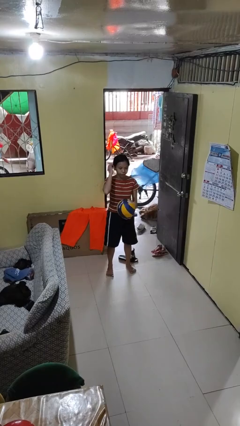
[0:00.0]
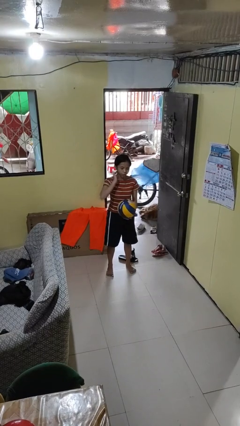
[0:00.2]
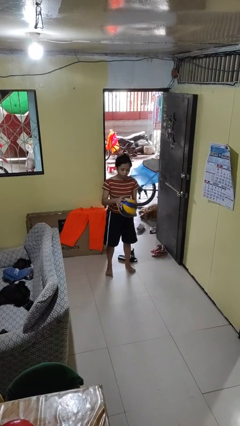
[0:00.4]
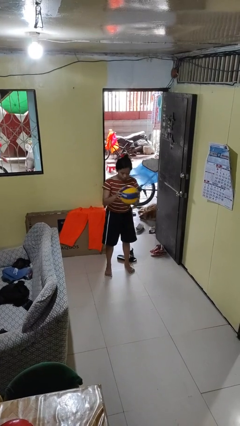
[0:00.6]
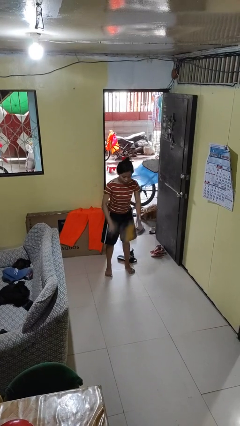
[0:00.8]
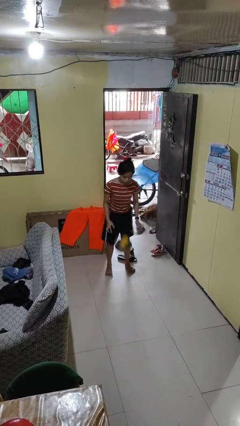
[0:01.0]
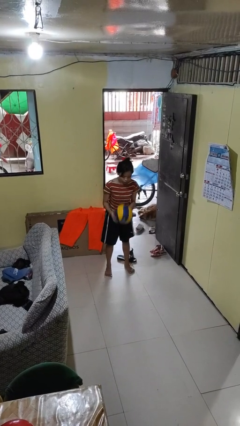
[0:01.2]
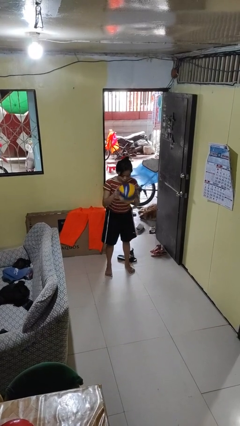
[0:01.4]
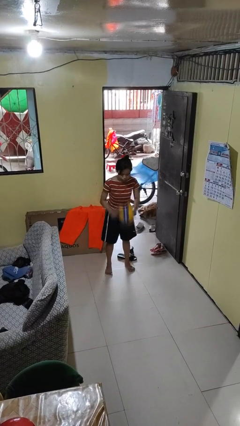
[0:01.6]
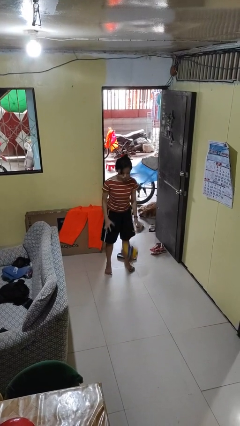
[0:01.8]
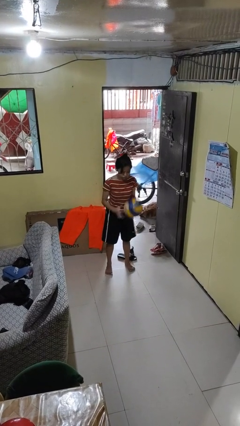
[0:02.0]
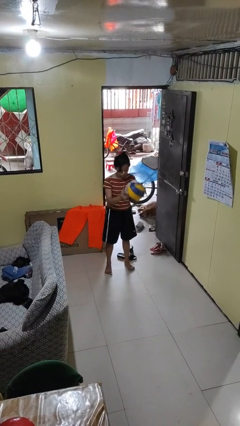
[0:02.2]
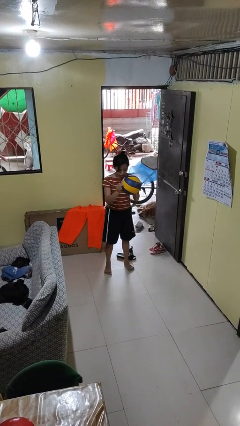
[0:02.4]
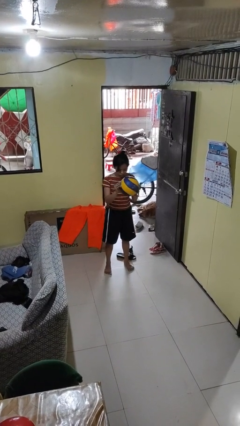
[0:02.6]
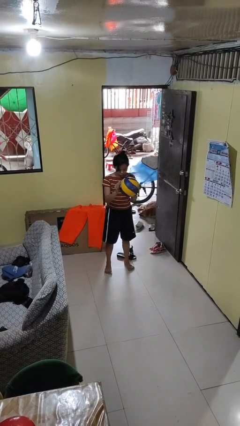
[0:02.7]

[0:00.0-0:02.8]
person bounces ball on floor

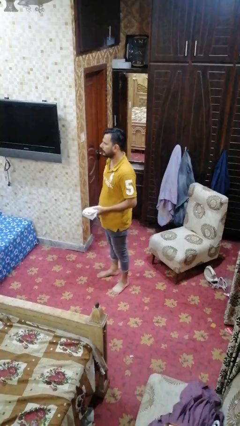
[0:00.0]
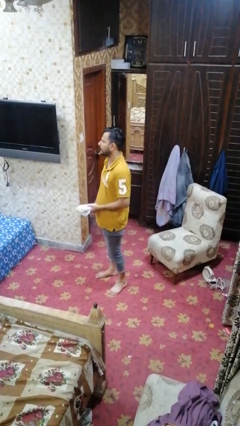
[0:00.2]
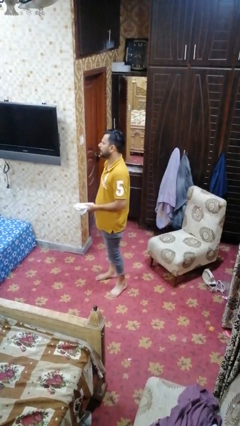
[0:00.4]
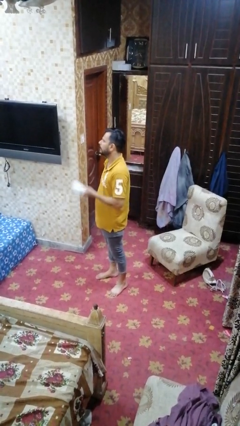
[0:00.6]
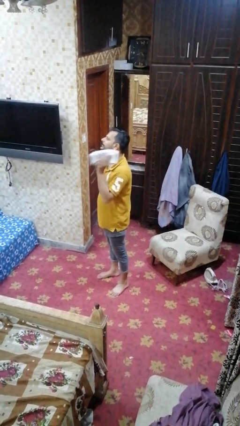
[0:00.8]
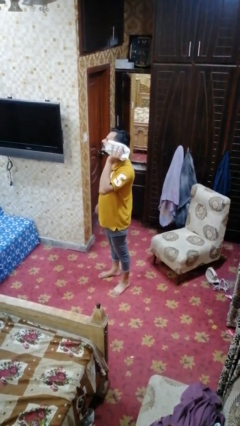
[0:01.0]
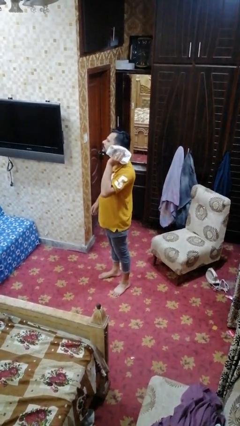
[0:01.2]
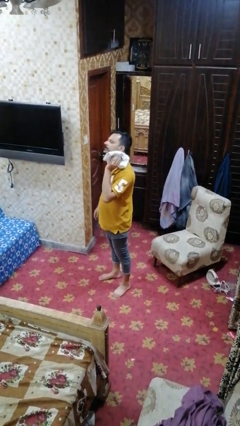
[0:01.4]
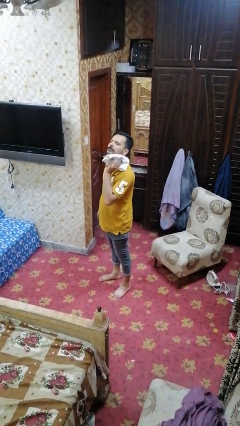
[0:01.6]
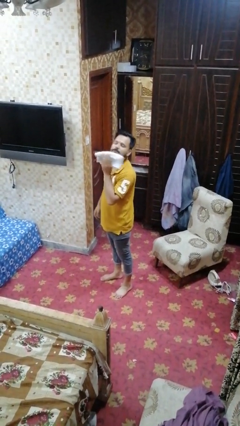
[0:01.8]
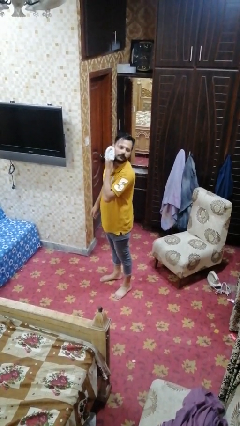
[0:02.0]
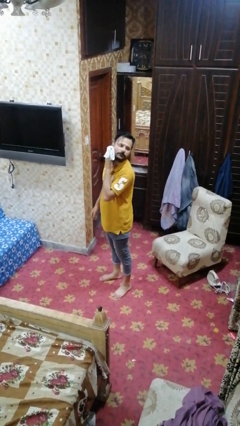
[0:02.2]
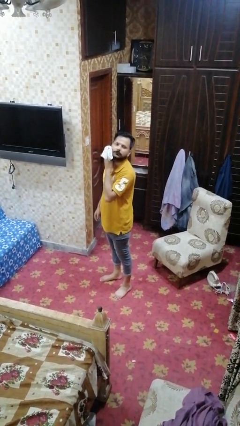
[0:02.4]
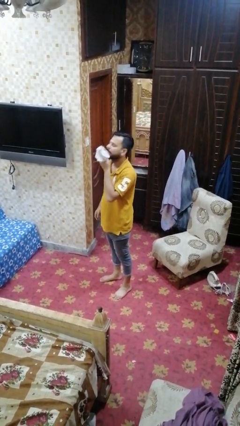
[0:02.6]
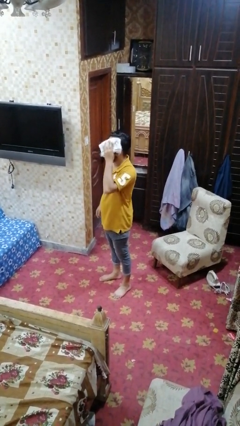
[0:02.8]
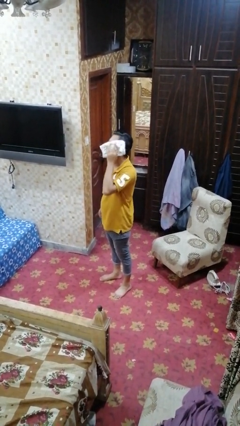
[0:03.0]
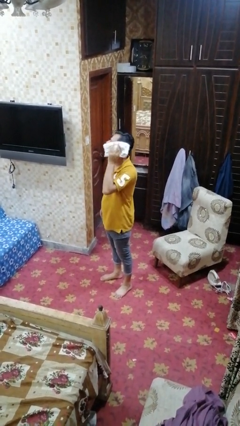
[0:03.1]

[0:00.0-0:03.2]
person wipes mouth with napkin

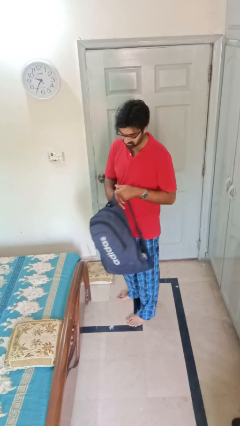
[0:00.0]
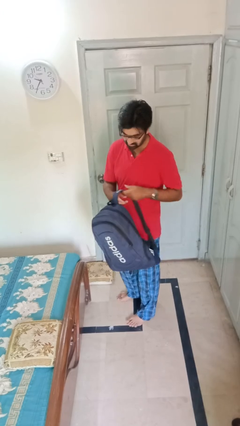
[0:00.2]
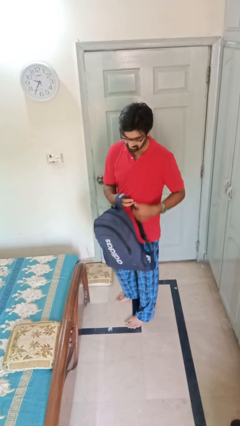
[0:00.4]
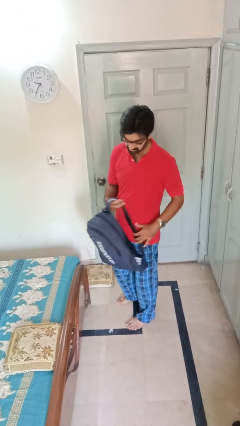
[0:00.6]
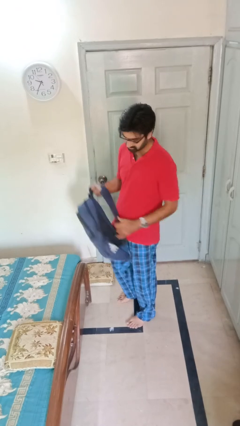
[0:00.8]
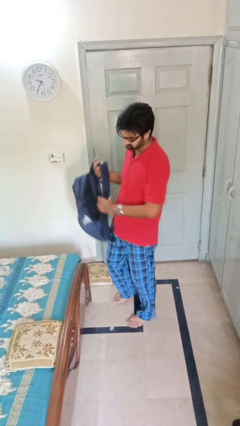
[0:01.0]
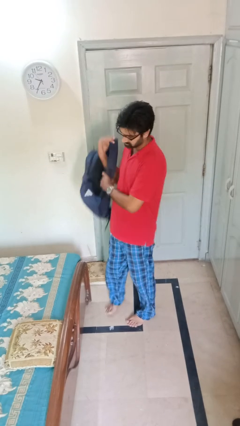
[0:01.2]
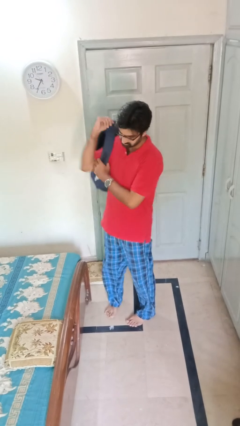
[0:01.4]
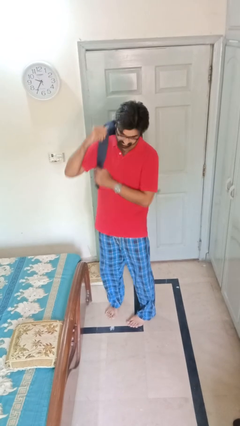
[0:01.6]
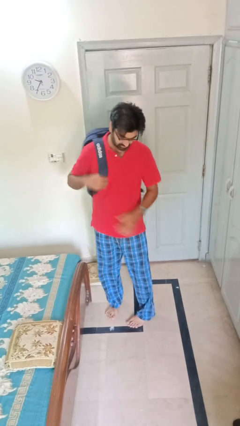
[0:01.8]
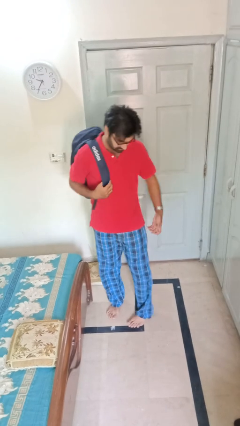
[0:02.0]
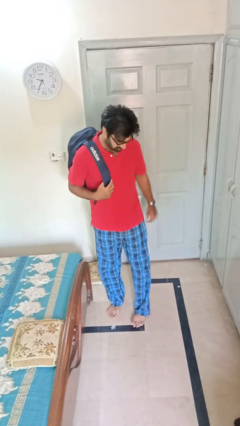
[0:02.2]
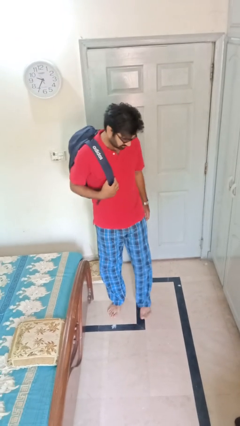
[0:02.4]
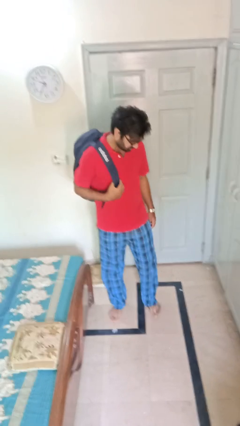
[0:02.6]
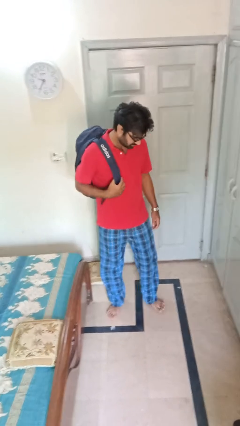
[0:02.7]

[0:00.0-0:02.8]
person puts on backpack

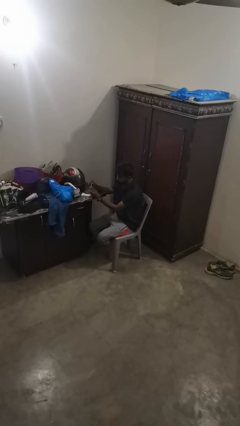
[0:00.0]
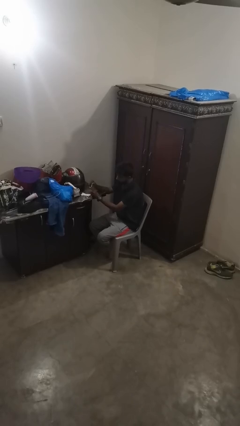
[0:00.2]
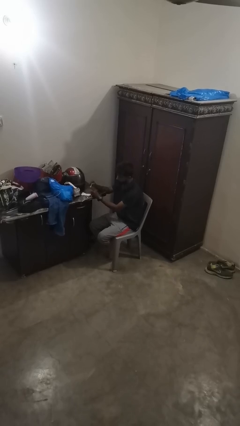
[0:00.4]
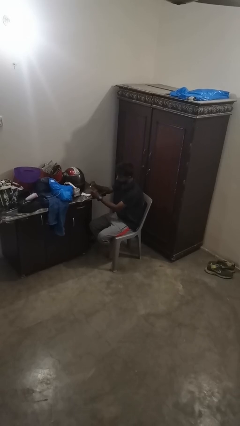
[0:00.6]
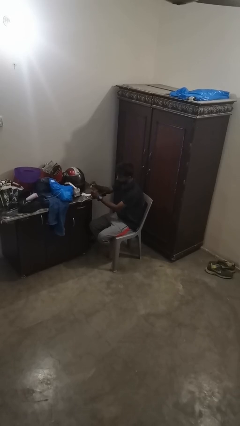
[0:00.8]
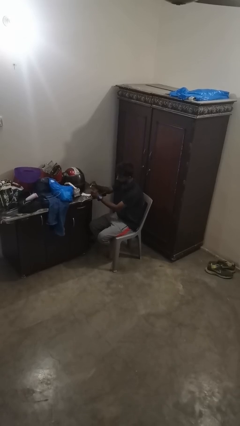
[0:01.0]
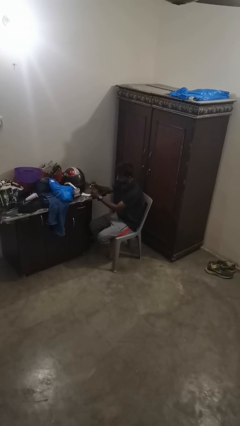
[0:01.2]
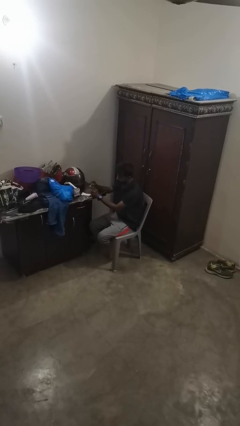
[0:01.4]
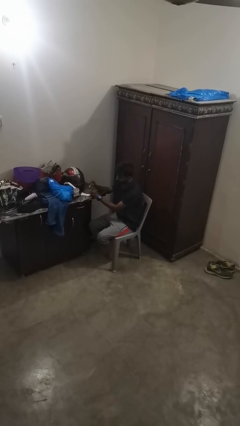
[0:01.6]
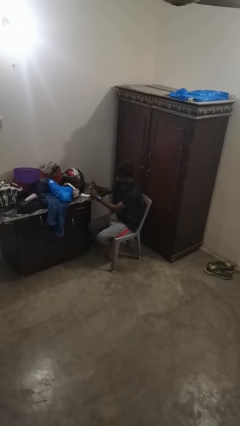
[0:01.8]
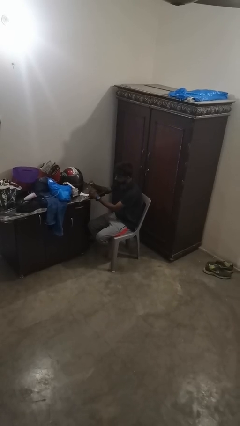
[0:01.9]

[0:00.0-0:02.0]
person paints fingernails

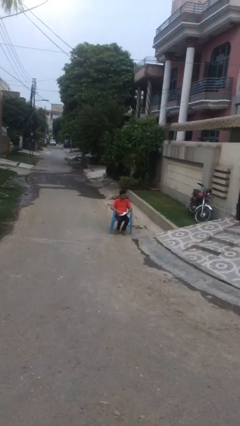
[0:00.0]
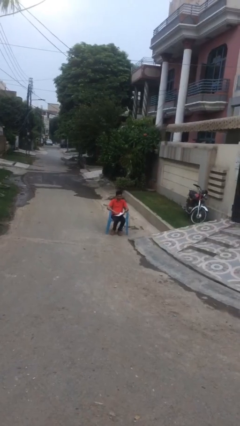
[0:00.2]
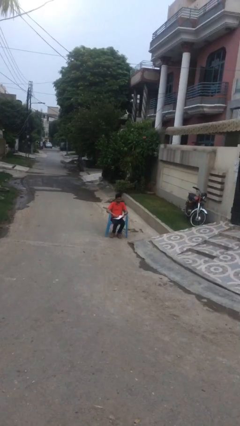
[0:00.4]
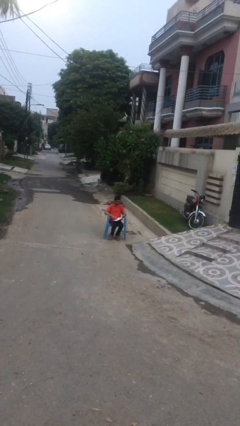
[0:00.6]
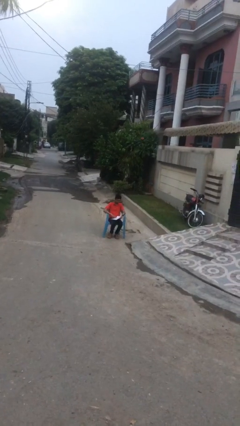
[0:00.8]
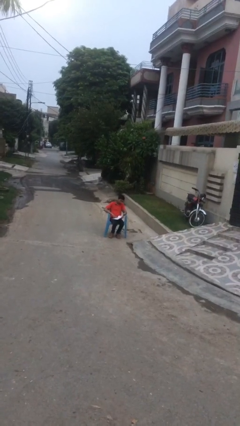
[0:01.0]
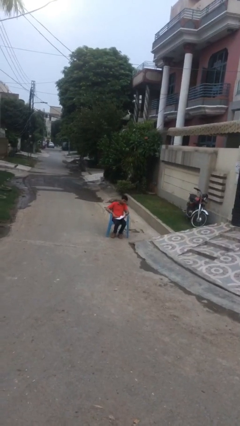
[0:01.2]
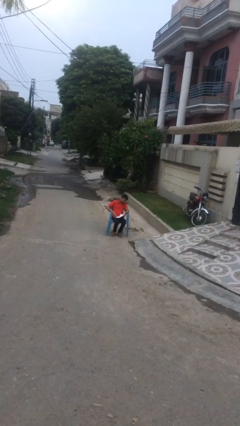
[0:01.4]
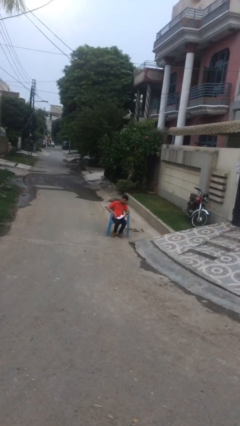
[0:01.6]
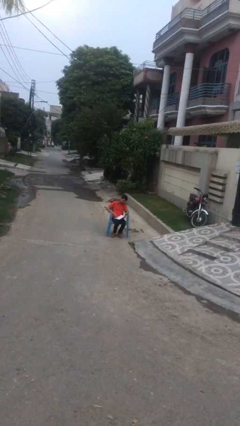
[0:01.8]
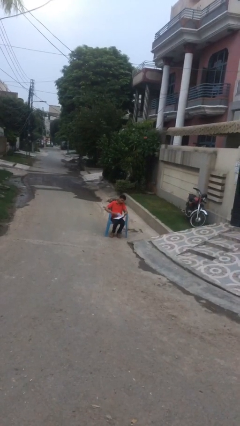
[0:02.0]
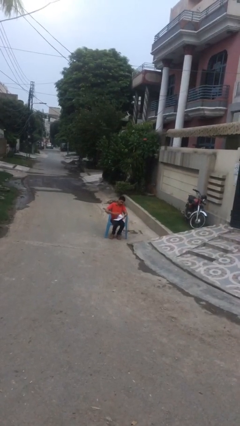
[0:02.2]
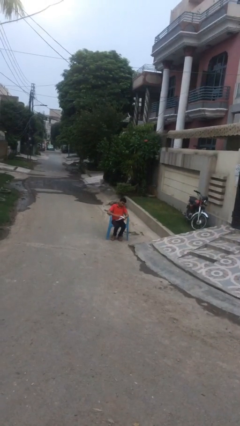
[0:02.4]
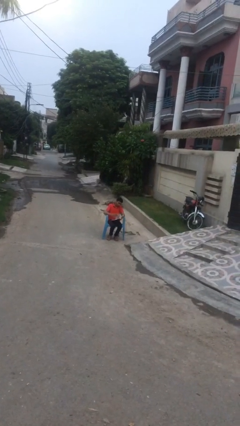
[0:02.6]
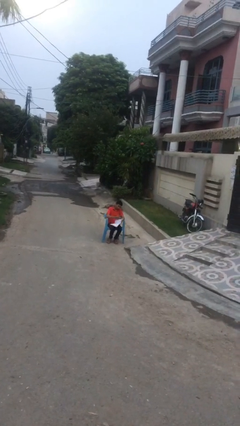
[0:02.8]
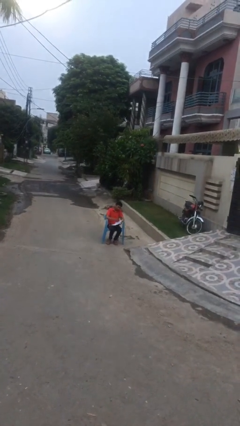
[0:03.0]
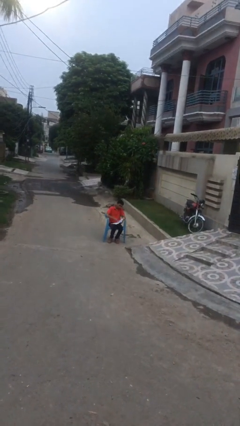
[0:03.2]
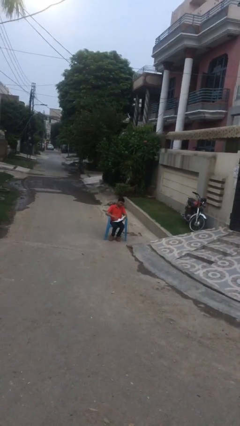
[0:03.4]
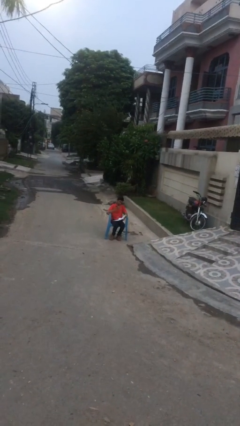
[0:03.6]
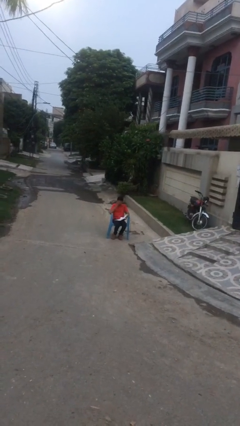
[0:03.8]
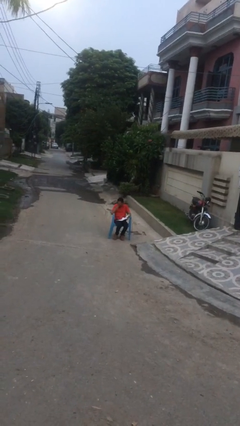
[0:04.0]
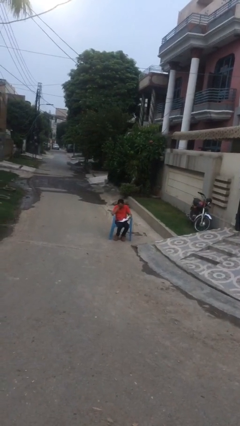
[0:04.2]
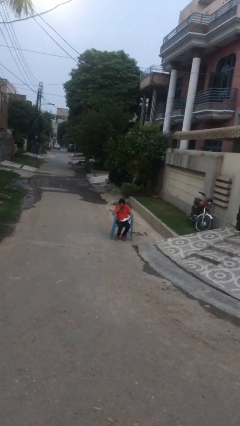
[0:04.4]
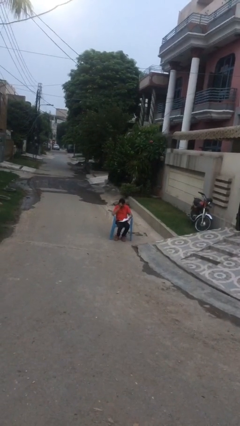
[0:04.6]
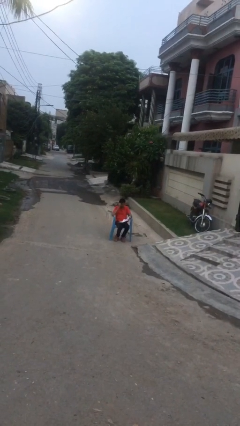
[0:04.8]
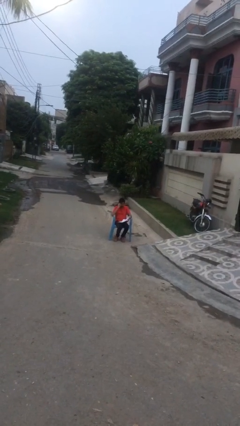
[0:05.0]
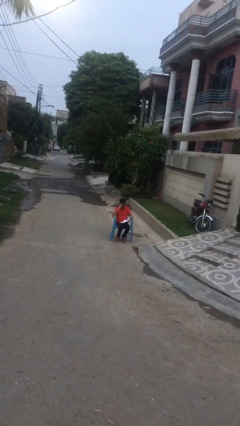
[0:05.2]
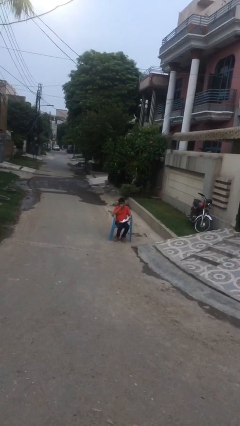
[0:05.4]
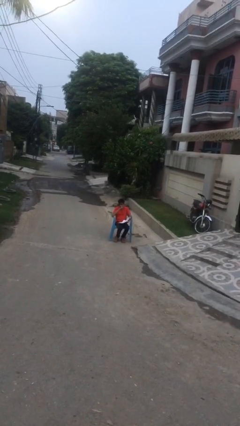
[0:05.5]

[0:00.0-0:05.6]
person reads document

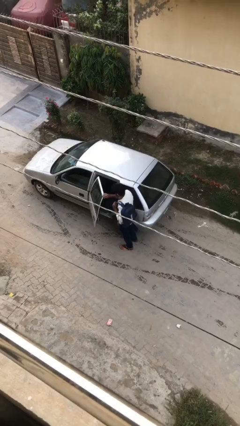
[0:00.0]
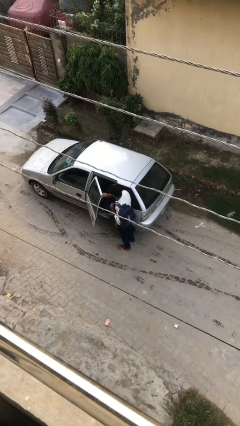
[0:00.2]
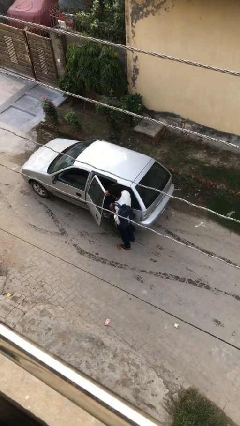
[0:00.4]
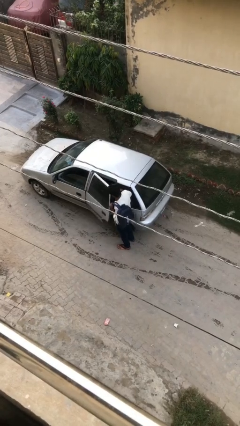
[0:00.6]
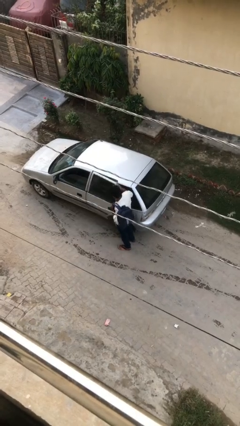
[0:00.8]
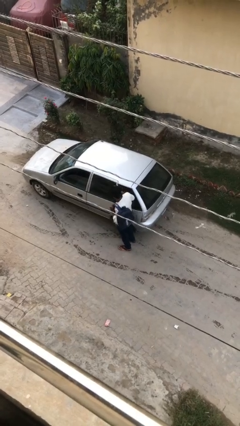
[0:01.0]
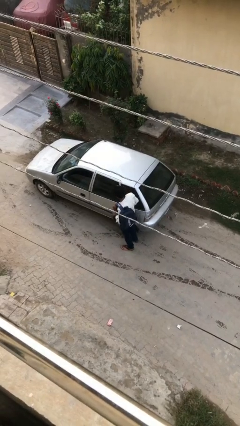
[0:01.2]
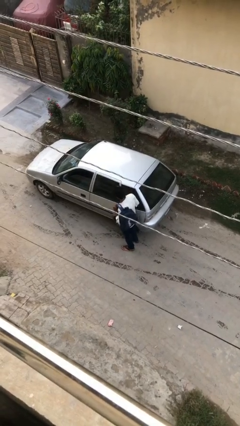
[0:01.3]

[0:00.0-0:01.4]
person closes car door
